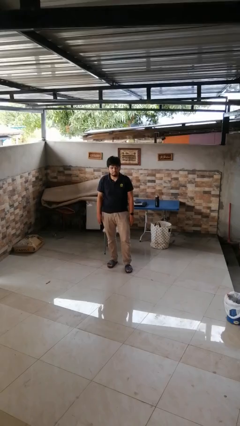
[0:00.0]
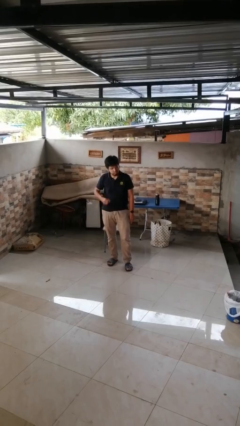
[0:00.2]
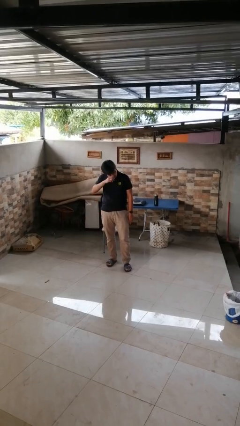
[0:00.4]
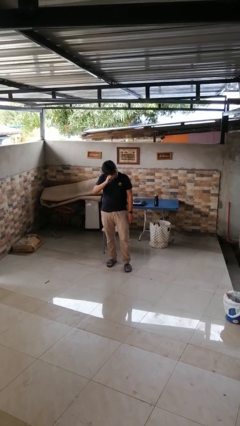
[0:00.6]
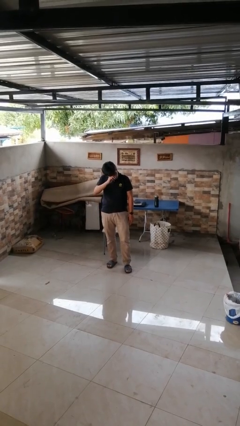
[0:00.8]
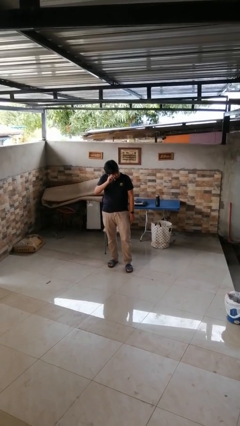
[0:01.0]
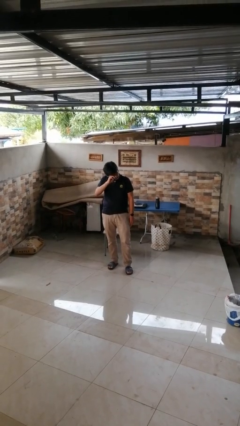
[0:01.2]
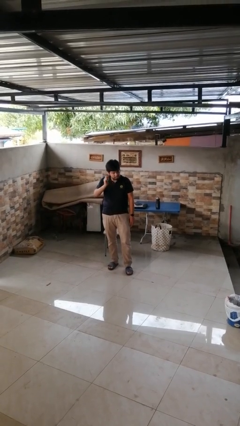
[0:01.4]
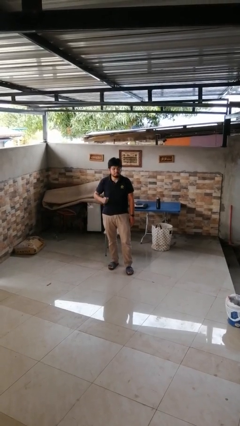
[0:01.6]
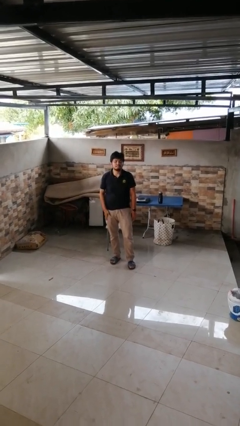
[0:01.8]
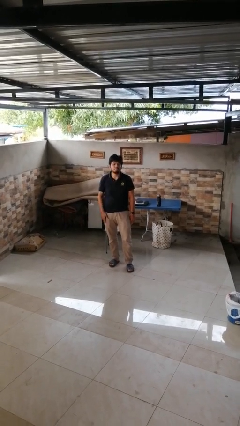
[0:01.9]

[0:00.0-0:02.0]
person scratches face

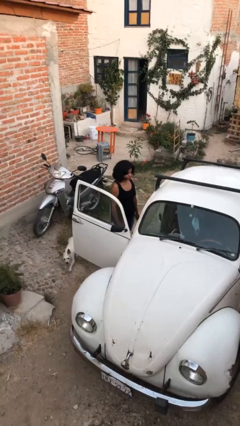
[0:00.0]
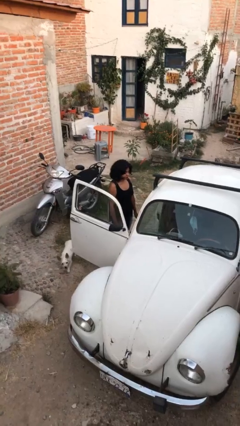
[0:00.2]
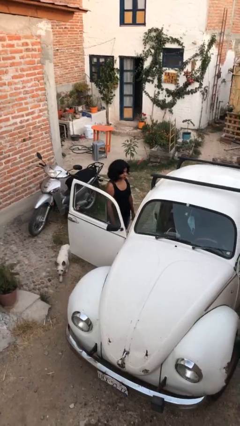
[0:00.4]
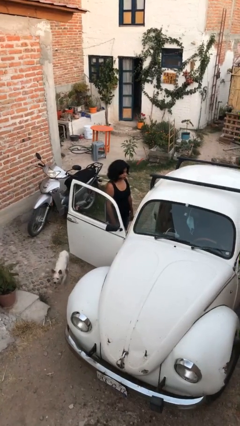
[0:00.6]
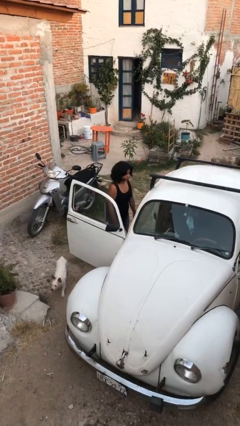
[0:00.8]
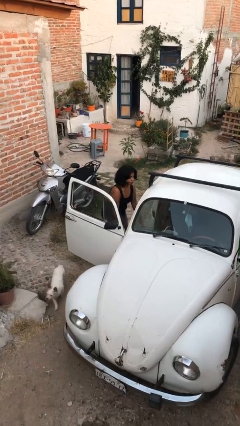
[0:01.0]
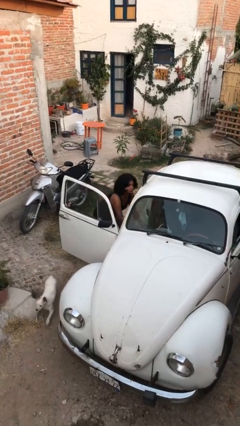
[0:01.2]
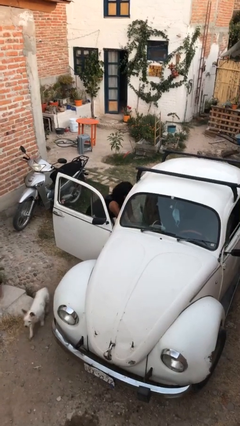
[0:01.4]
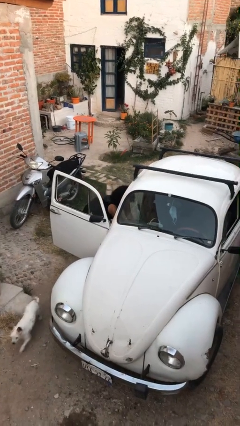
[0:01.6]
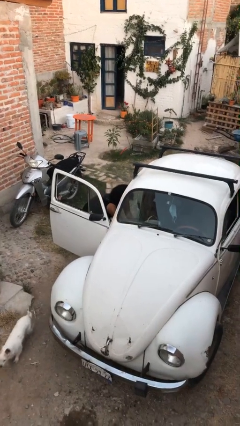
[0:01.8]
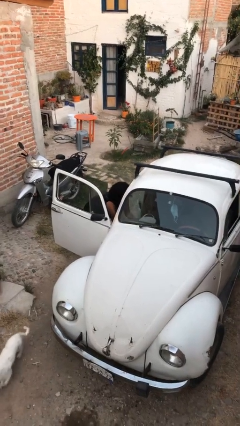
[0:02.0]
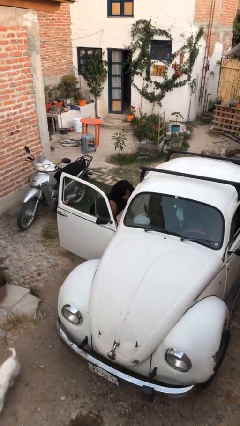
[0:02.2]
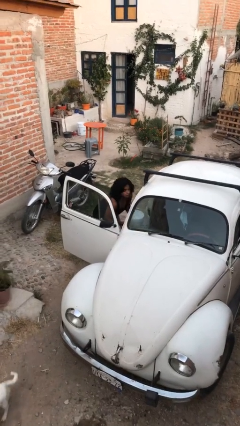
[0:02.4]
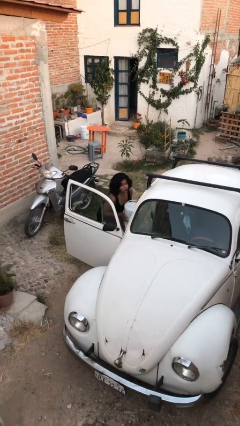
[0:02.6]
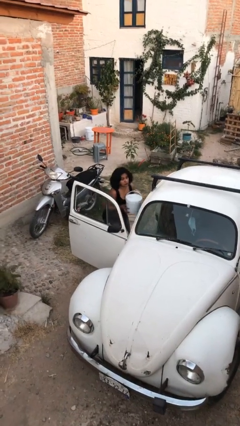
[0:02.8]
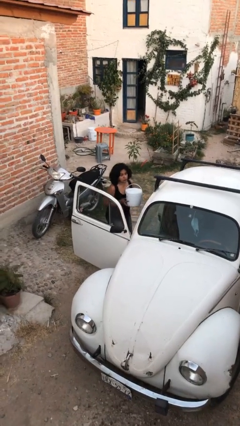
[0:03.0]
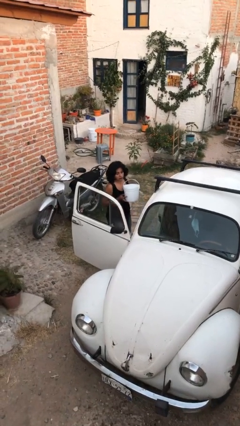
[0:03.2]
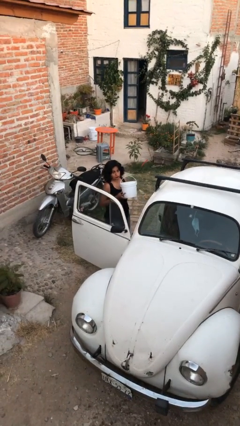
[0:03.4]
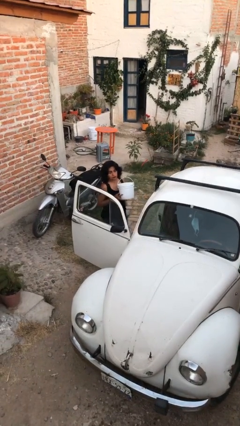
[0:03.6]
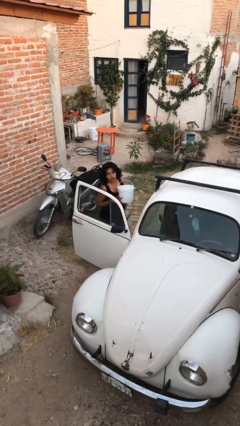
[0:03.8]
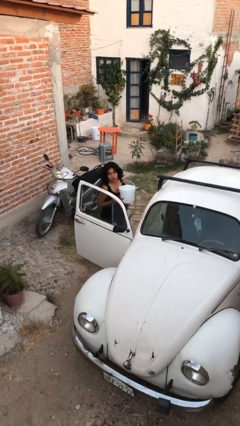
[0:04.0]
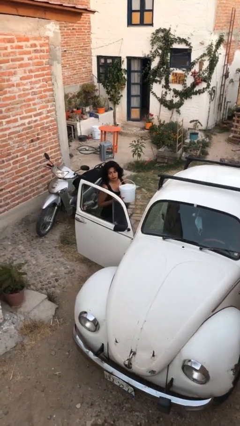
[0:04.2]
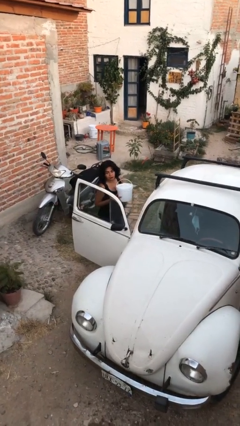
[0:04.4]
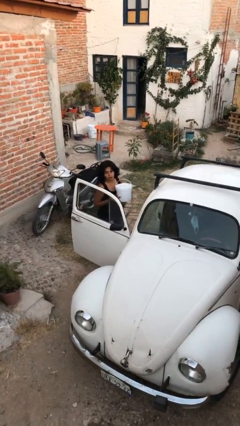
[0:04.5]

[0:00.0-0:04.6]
person unloads car

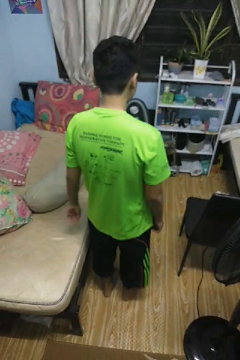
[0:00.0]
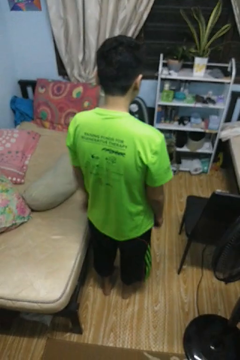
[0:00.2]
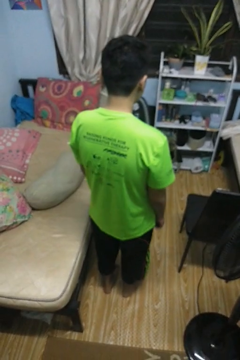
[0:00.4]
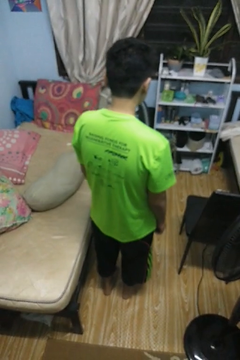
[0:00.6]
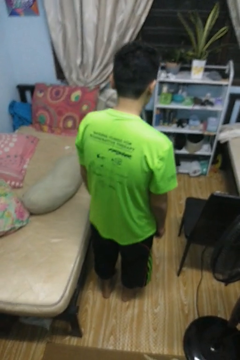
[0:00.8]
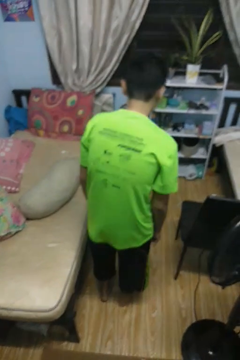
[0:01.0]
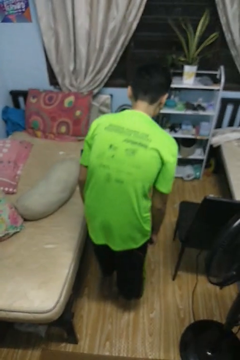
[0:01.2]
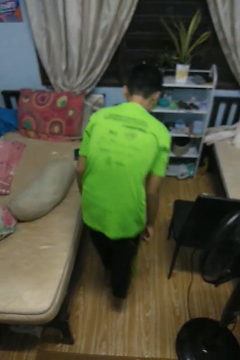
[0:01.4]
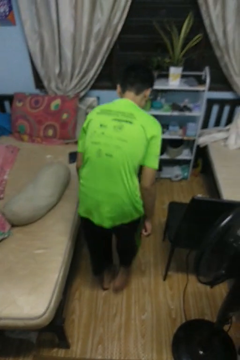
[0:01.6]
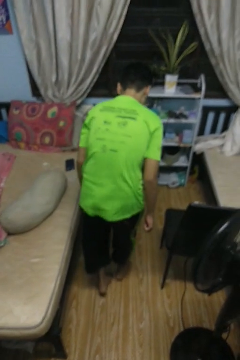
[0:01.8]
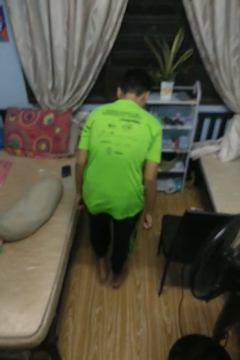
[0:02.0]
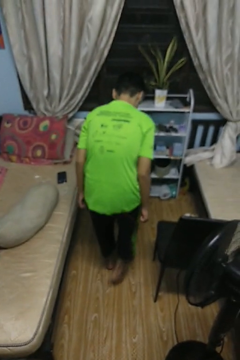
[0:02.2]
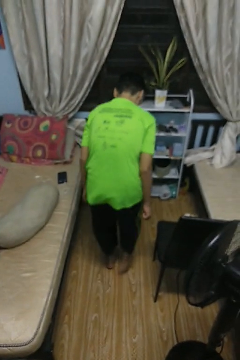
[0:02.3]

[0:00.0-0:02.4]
person walks tiptoe

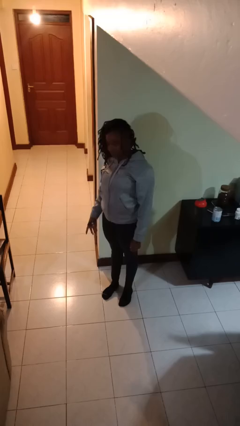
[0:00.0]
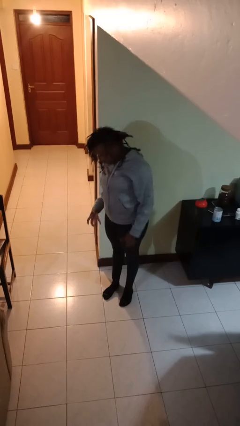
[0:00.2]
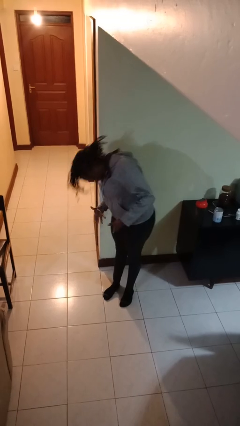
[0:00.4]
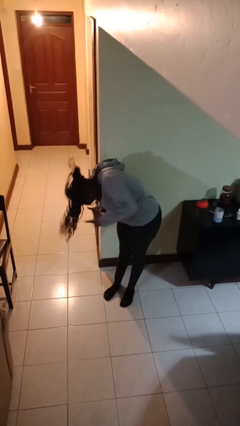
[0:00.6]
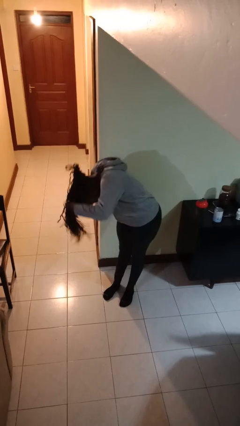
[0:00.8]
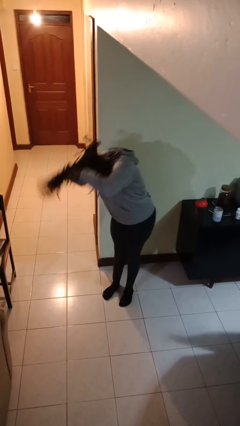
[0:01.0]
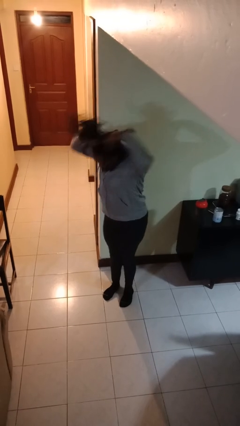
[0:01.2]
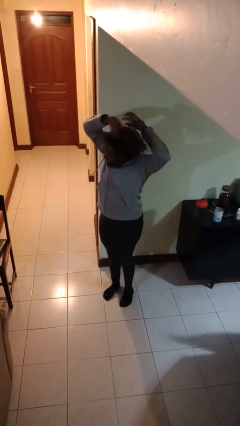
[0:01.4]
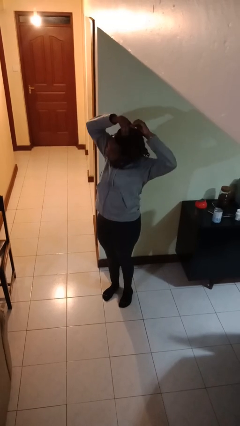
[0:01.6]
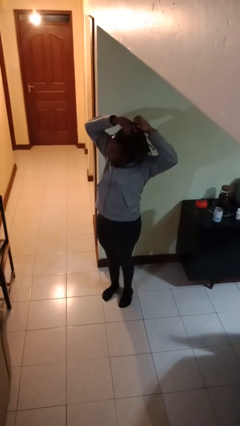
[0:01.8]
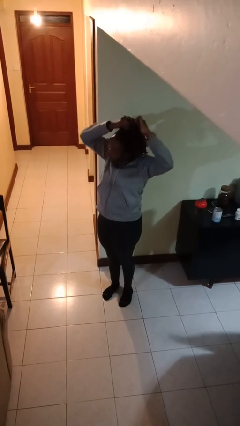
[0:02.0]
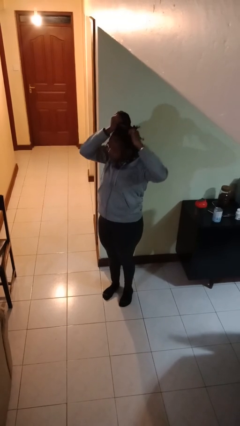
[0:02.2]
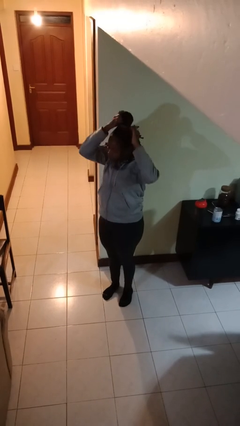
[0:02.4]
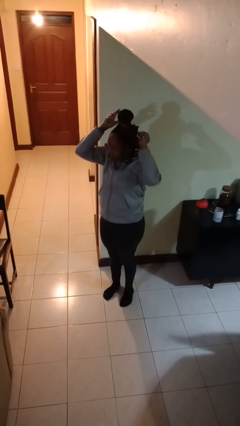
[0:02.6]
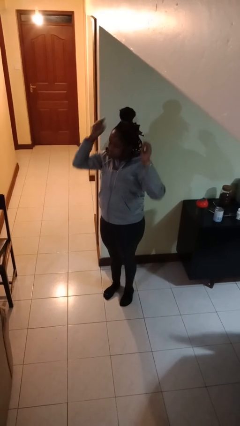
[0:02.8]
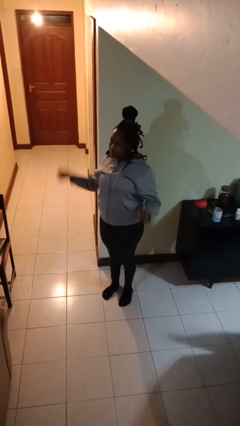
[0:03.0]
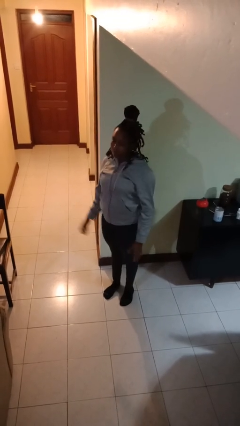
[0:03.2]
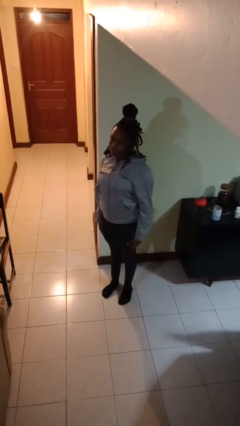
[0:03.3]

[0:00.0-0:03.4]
person puts hair in ponytail

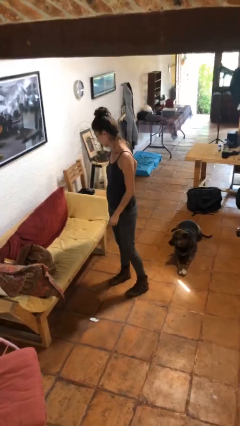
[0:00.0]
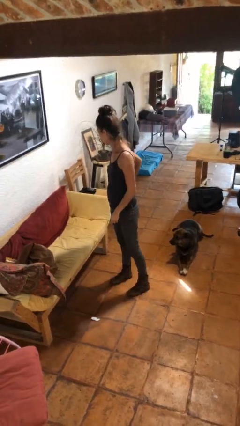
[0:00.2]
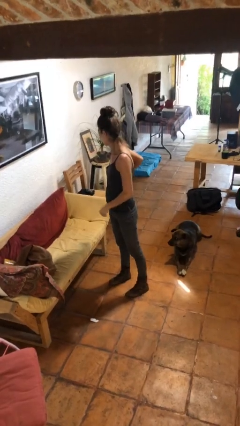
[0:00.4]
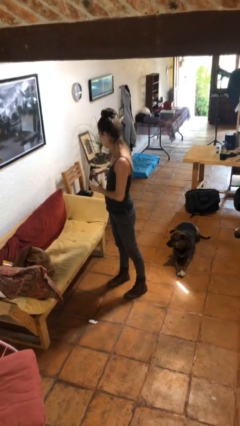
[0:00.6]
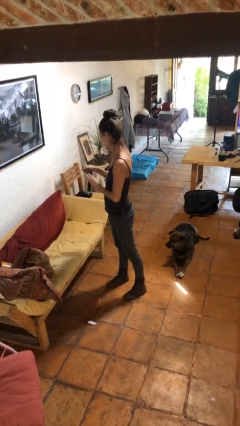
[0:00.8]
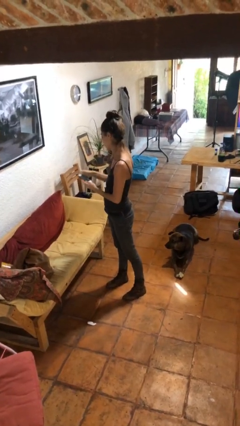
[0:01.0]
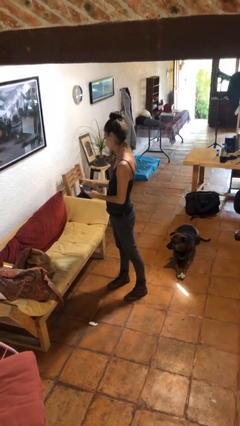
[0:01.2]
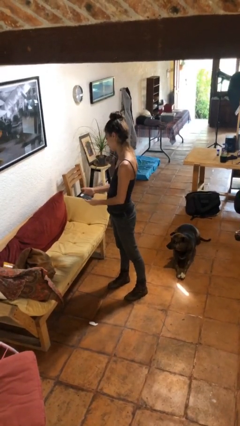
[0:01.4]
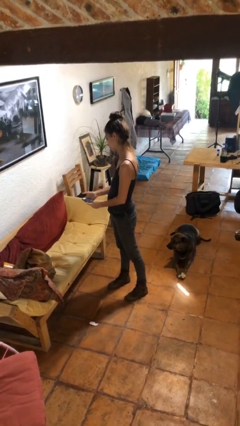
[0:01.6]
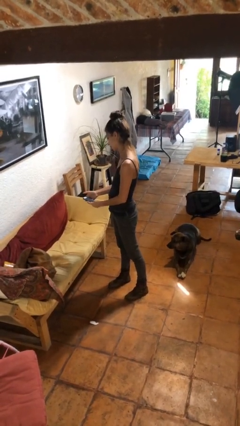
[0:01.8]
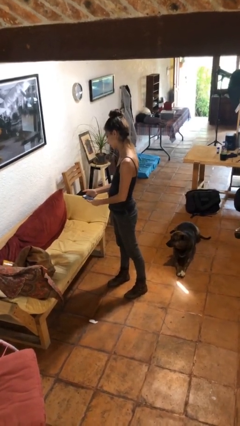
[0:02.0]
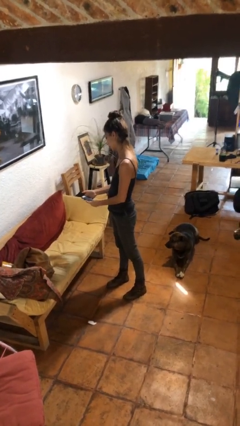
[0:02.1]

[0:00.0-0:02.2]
person takes phone from pocket

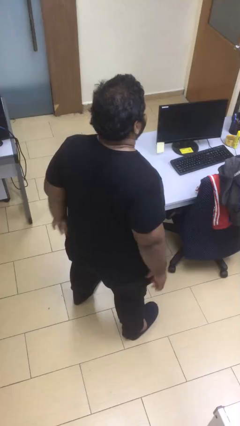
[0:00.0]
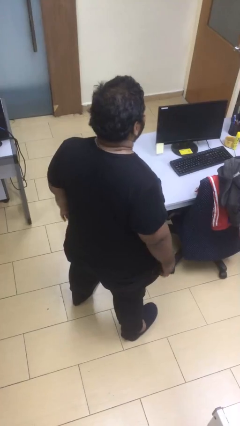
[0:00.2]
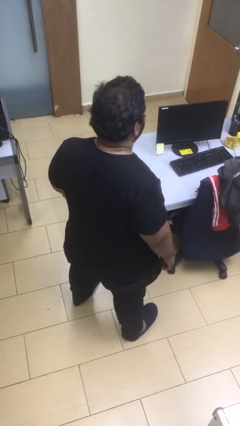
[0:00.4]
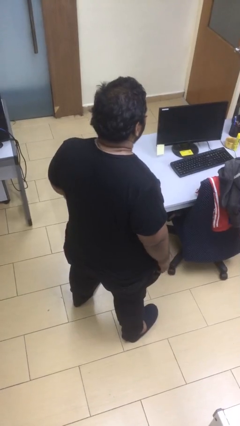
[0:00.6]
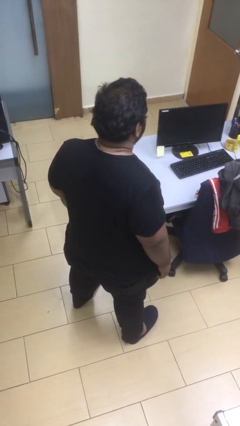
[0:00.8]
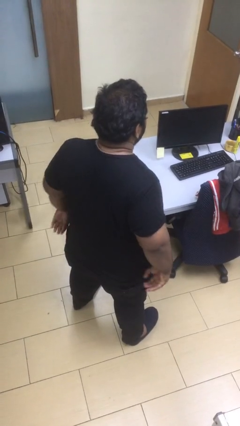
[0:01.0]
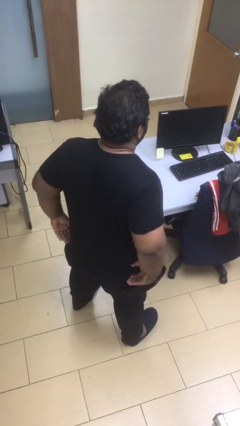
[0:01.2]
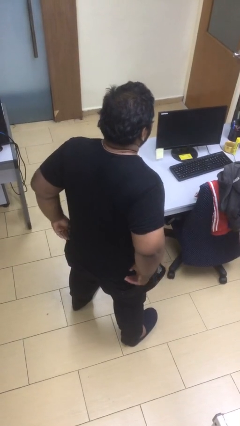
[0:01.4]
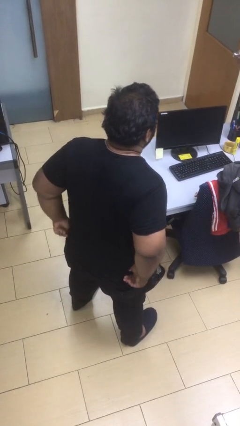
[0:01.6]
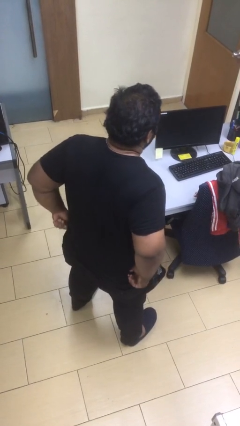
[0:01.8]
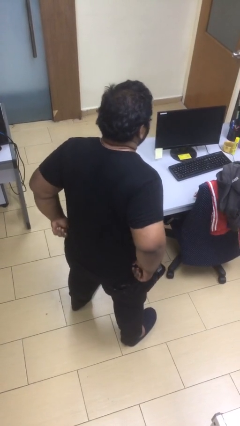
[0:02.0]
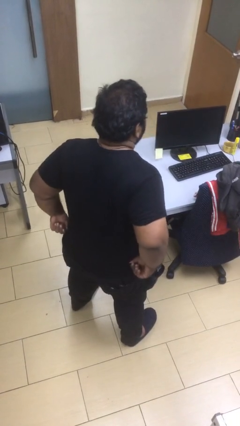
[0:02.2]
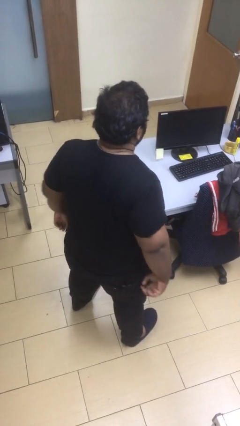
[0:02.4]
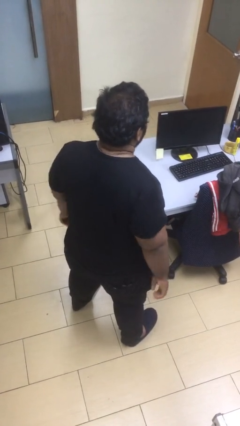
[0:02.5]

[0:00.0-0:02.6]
person hikes up pants

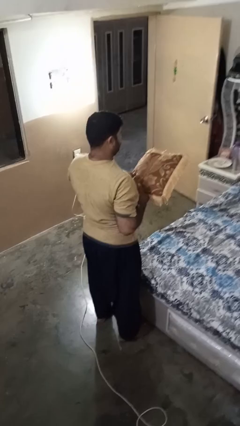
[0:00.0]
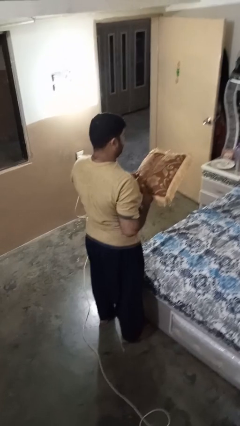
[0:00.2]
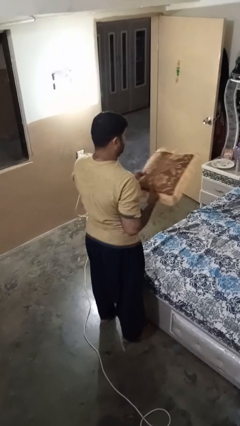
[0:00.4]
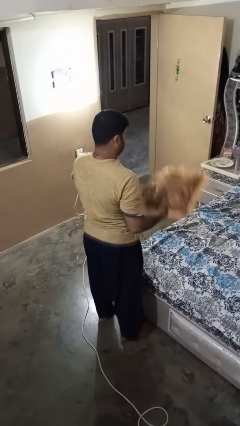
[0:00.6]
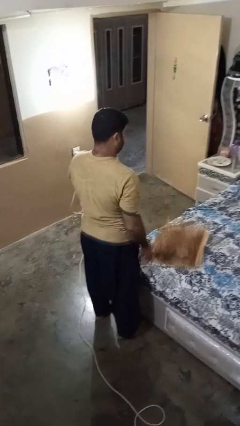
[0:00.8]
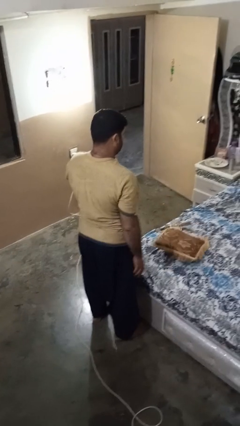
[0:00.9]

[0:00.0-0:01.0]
person puts down object on bed
